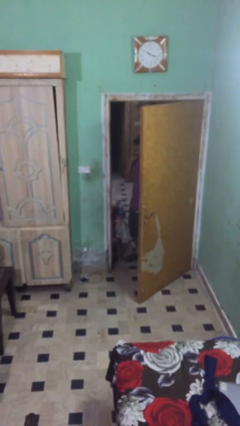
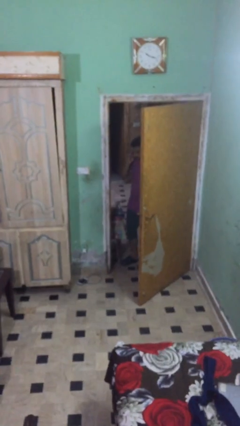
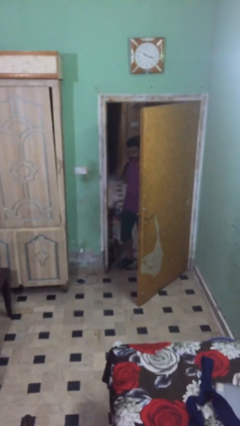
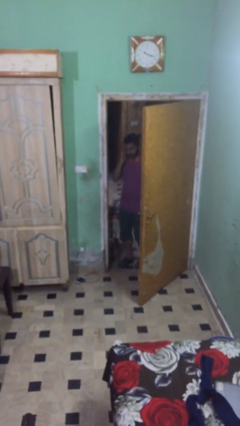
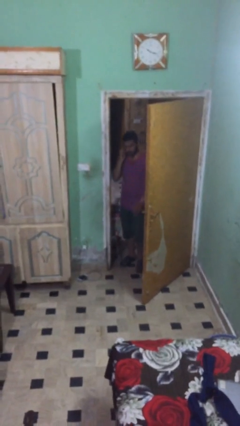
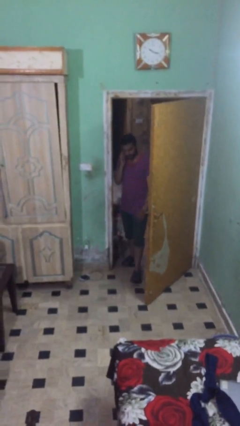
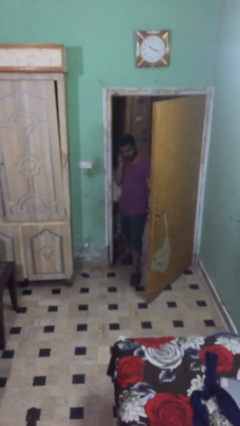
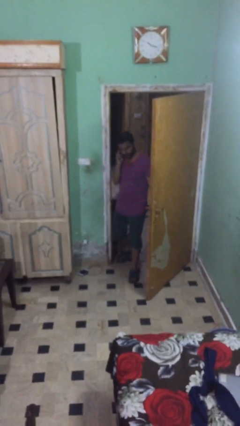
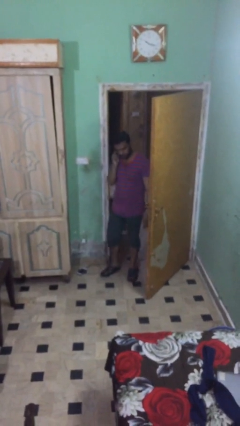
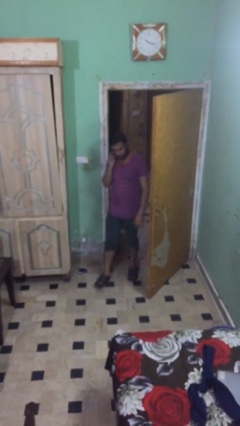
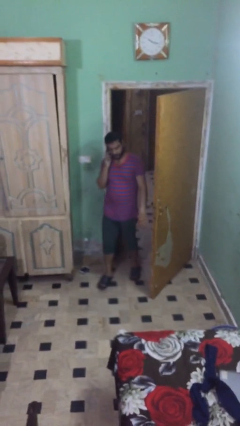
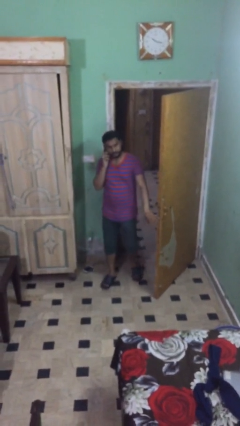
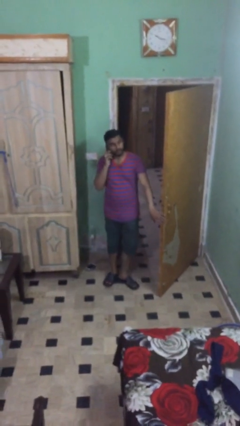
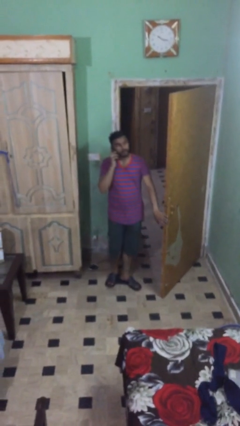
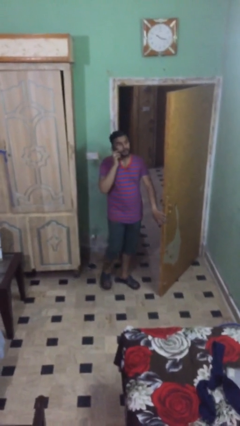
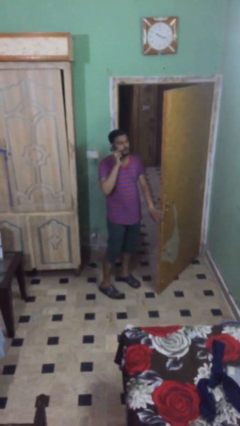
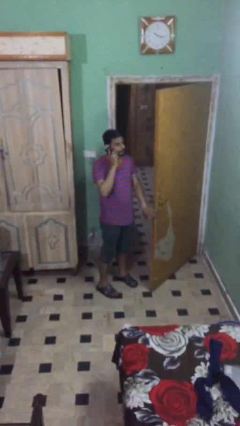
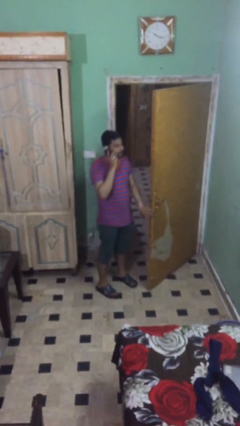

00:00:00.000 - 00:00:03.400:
person enters scene through structure

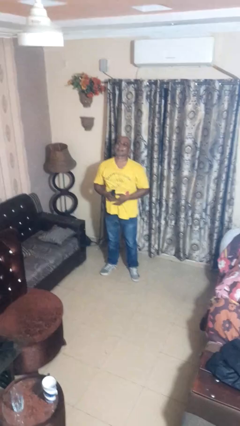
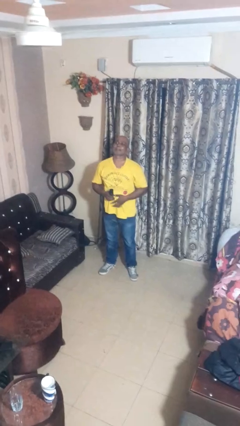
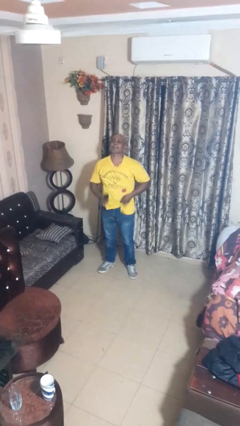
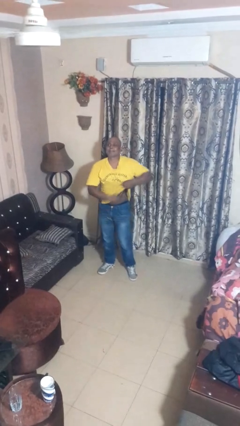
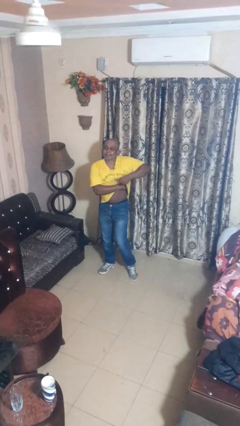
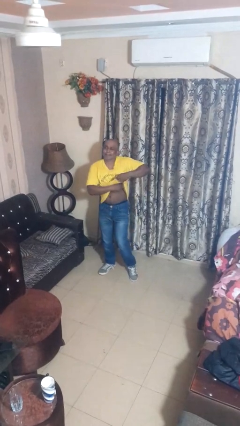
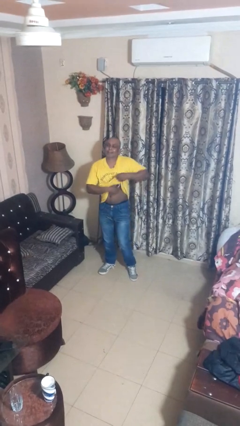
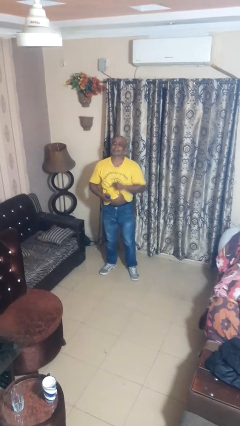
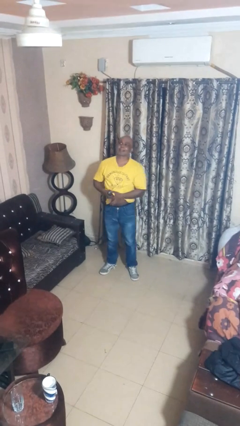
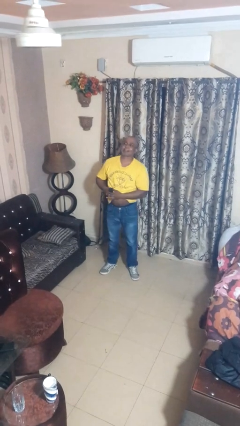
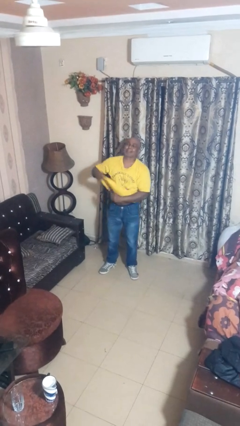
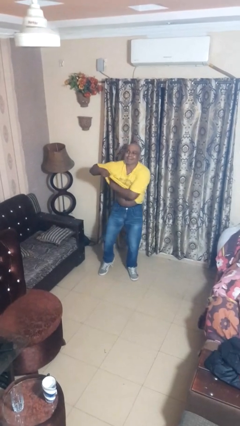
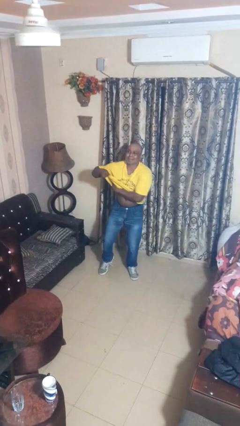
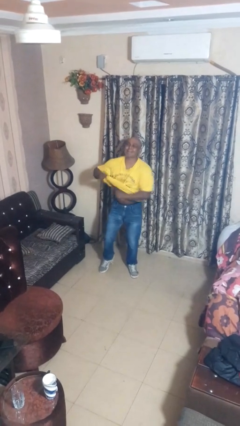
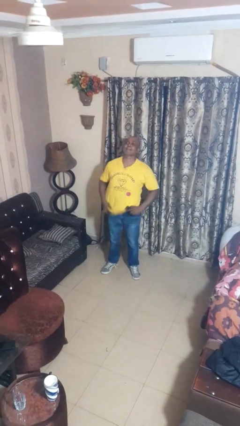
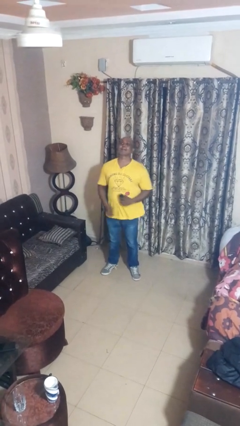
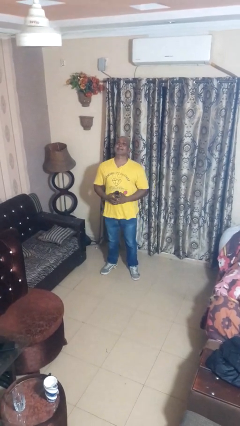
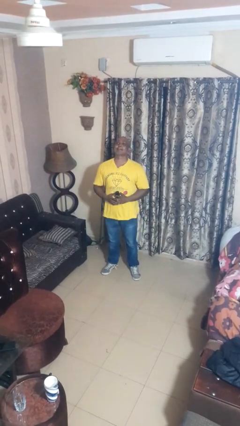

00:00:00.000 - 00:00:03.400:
person applies deodorant

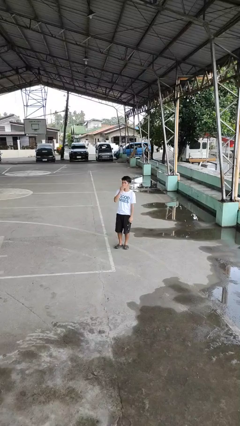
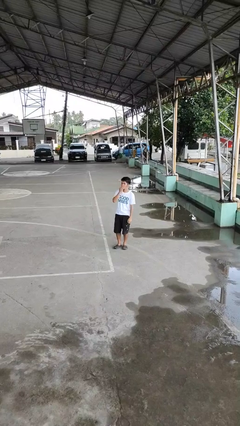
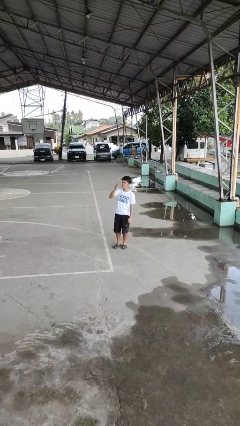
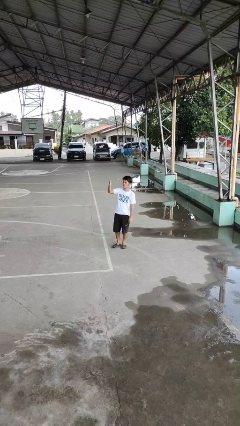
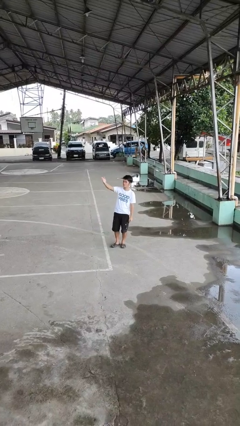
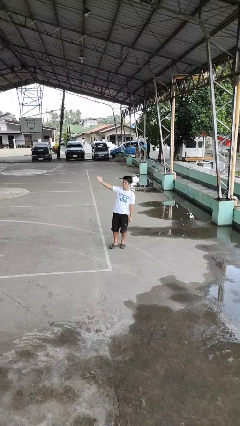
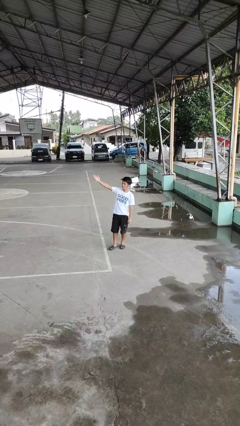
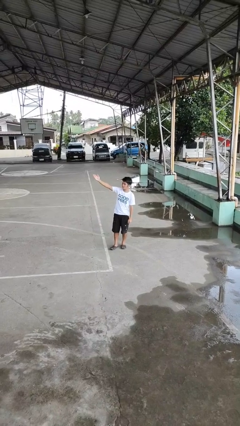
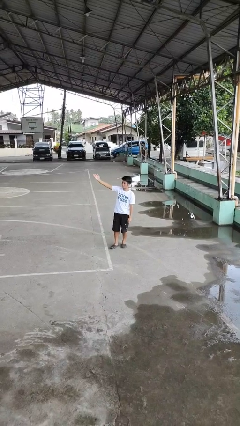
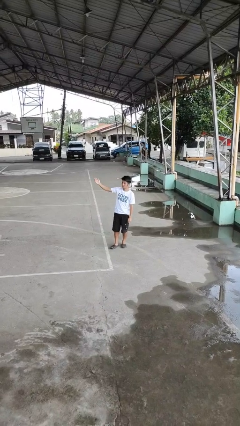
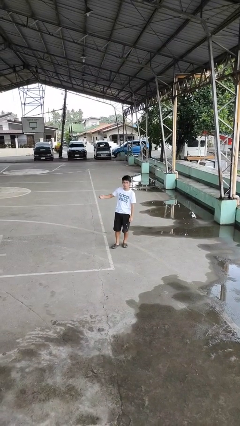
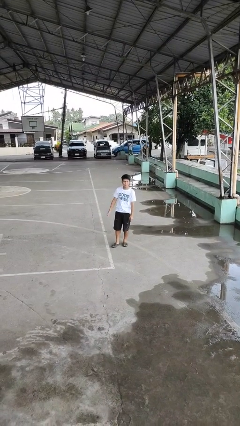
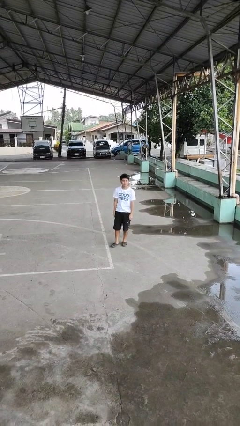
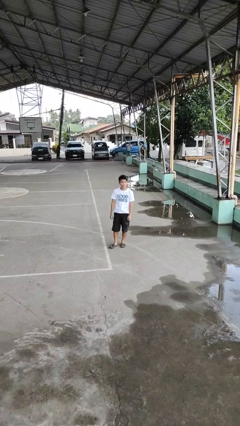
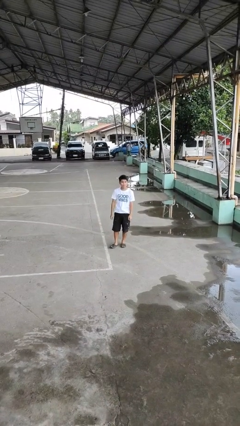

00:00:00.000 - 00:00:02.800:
person gestures blow kiss

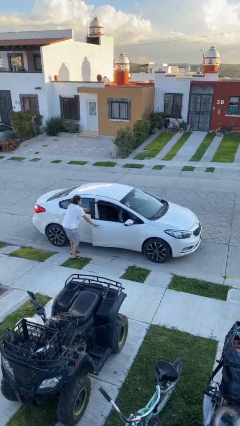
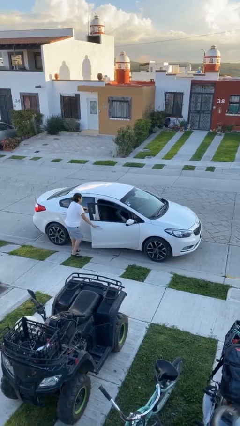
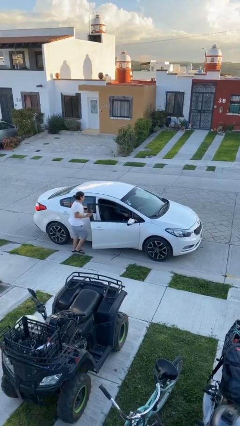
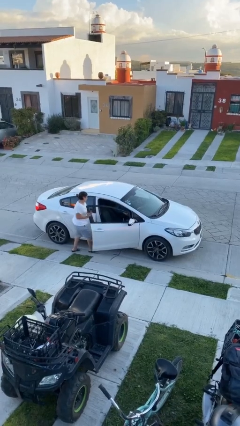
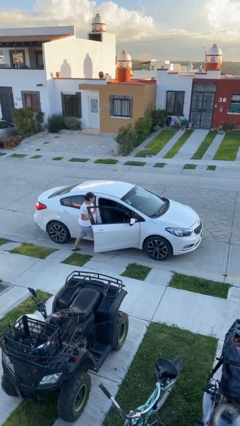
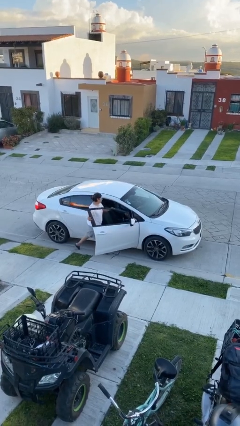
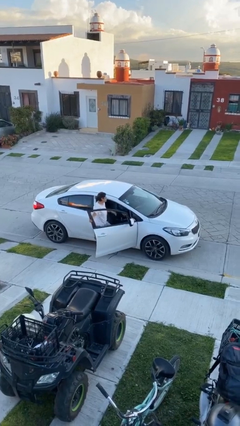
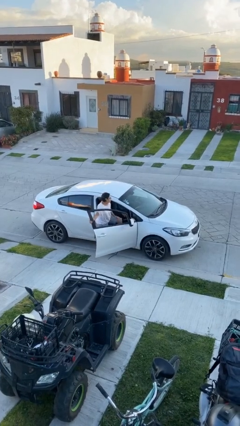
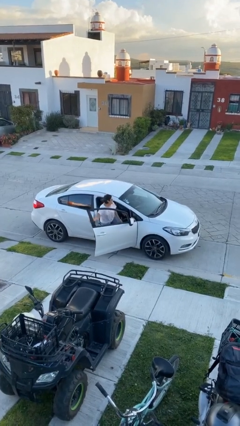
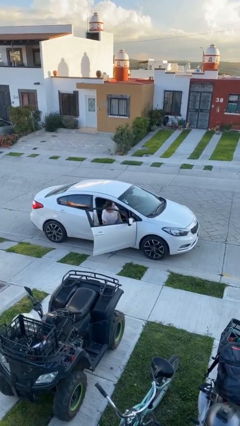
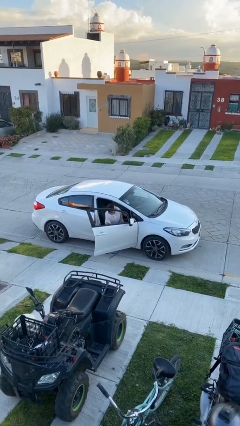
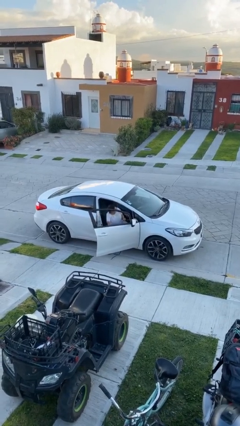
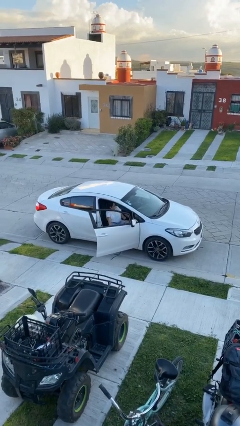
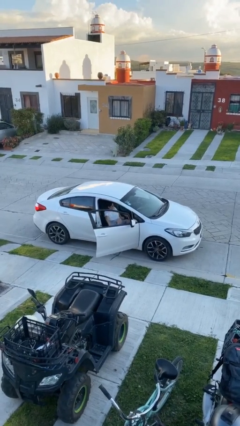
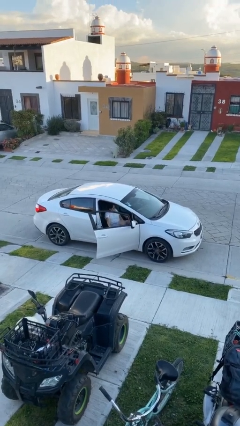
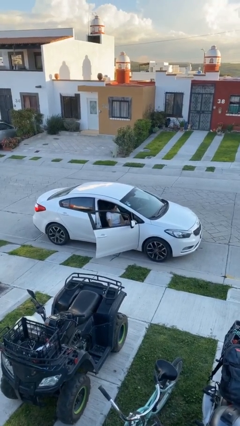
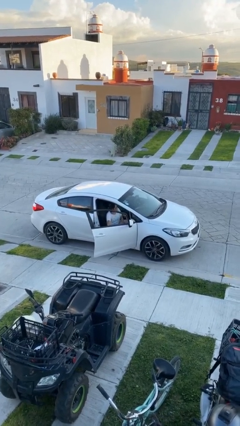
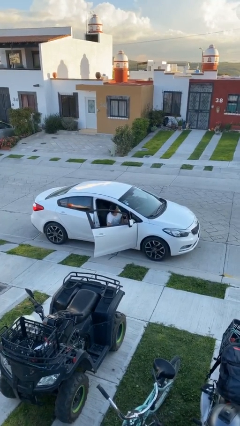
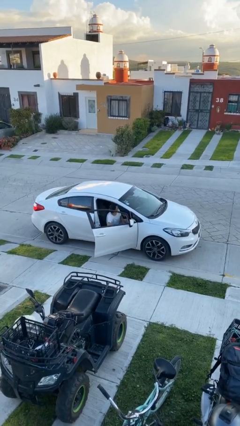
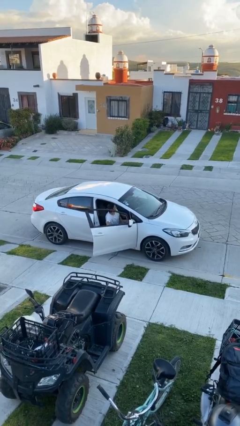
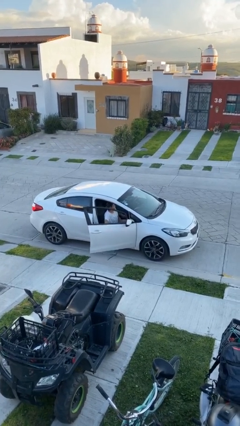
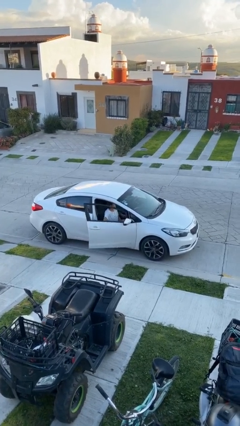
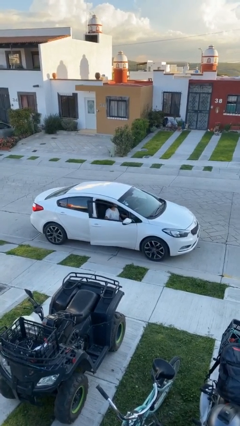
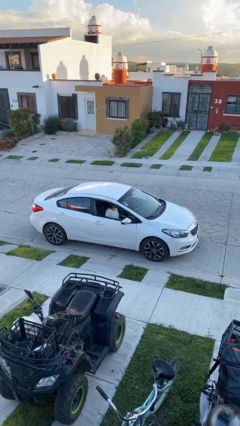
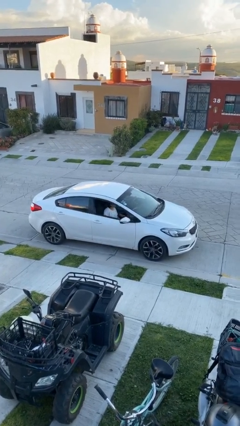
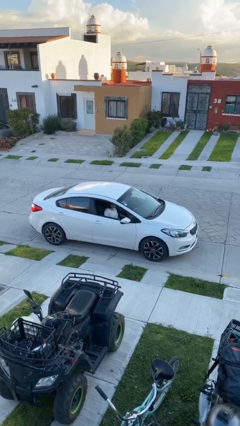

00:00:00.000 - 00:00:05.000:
car picks up person

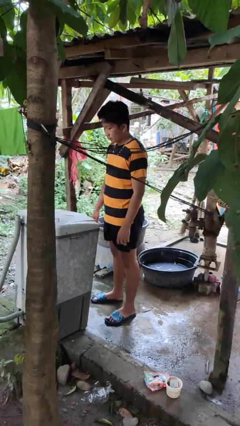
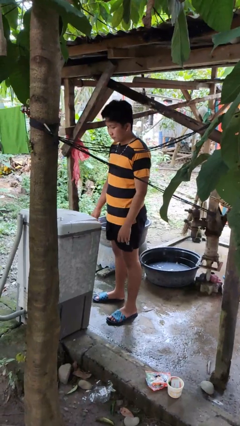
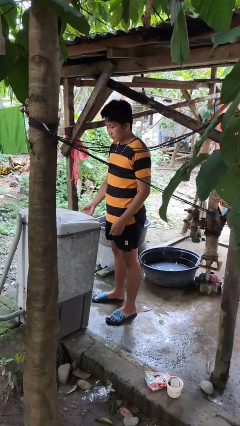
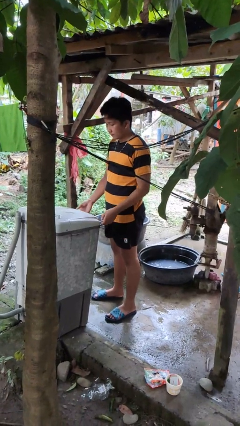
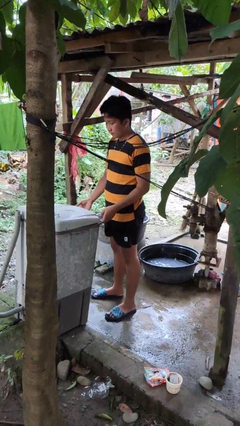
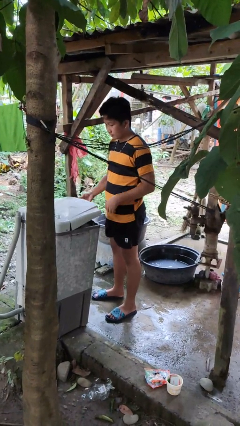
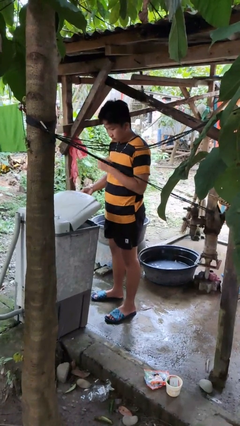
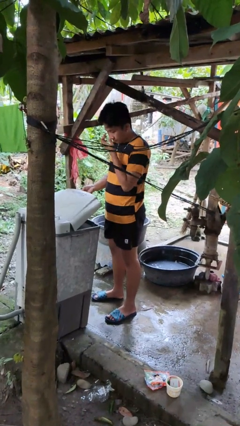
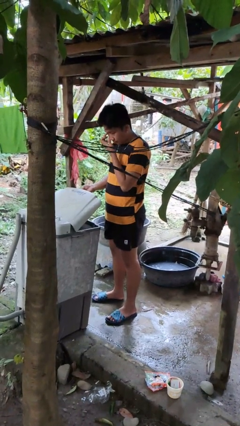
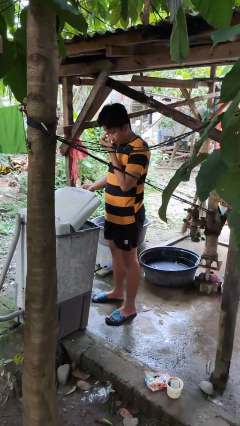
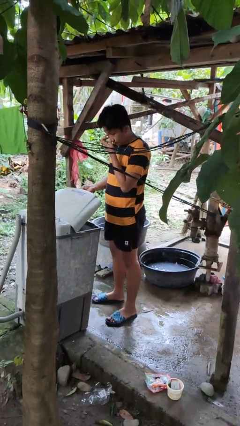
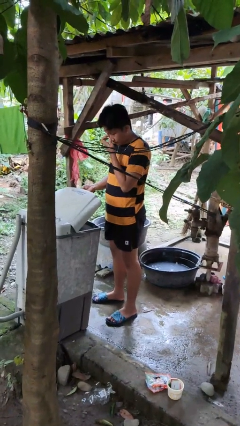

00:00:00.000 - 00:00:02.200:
person opens clothes washer

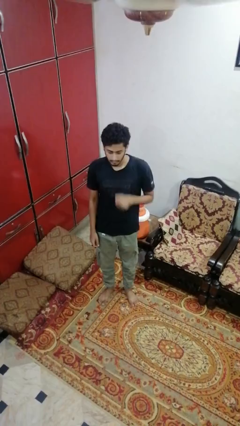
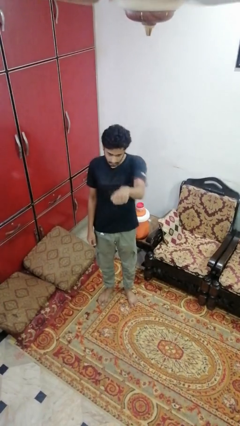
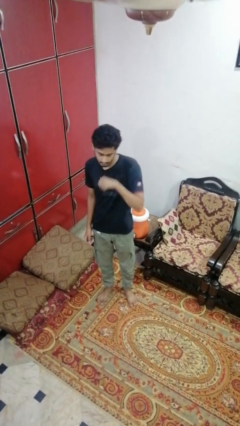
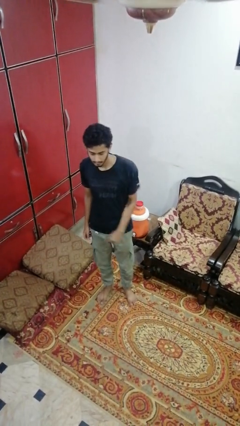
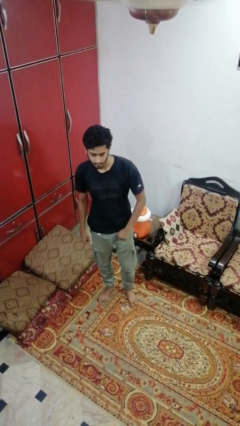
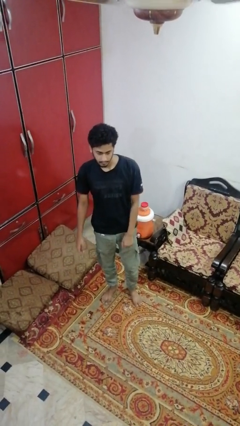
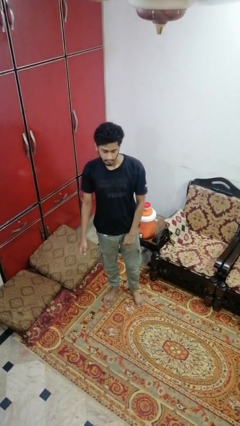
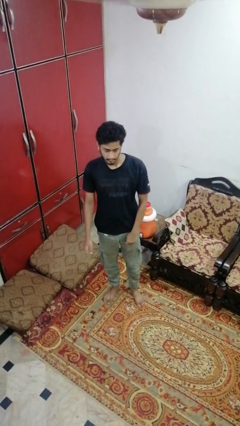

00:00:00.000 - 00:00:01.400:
person punches
